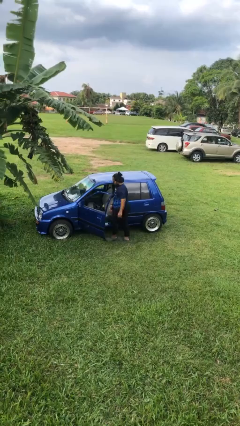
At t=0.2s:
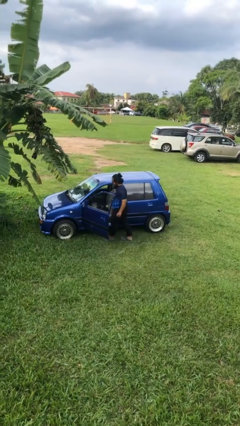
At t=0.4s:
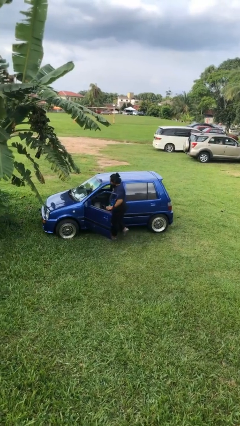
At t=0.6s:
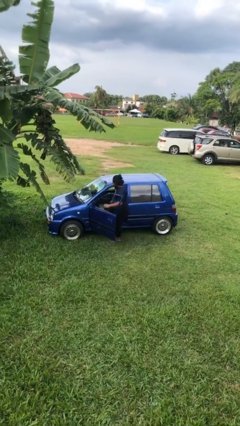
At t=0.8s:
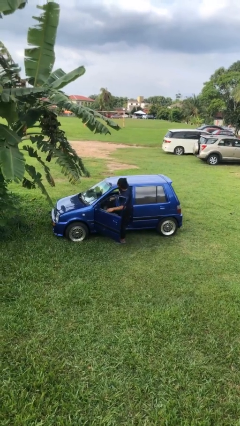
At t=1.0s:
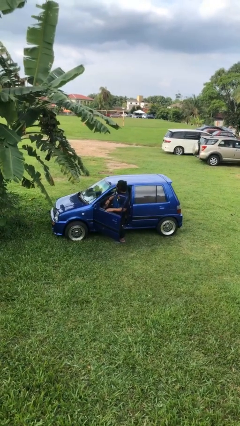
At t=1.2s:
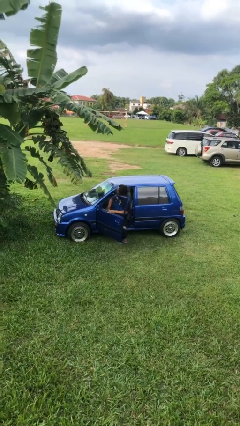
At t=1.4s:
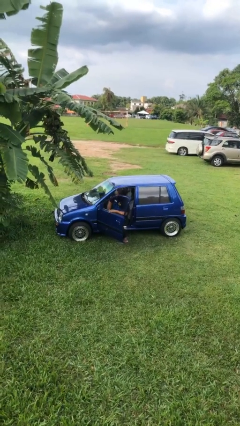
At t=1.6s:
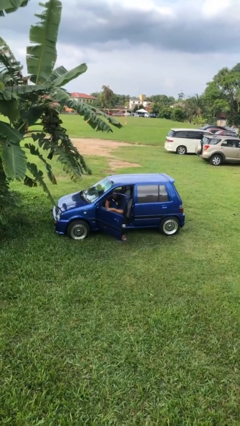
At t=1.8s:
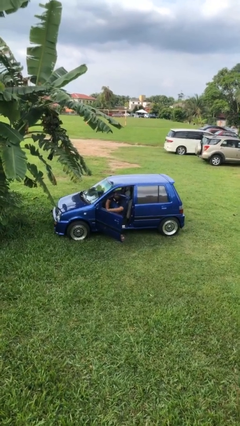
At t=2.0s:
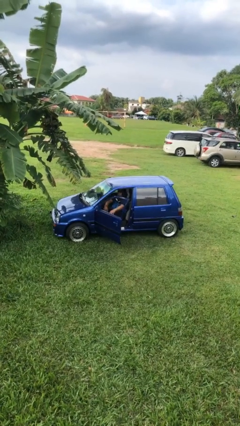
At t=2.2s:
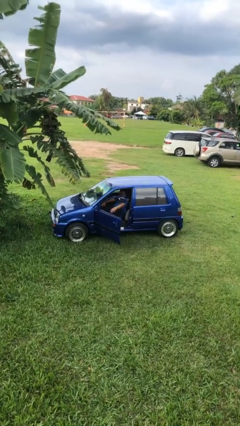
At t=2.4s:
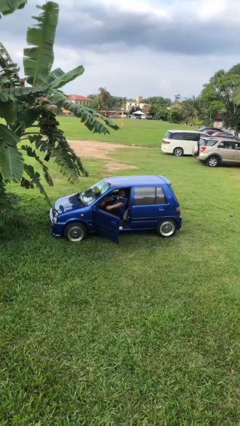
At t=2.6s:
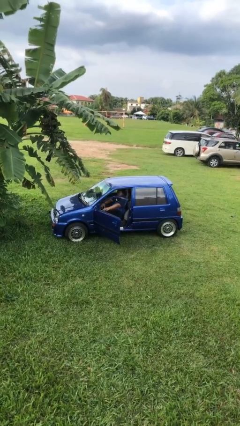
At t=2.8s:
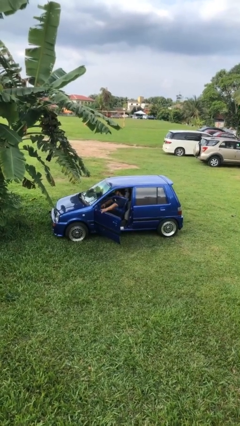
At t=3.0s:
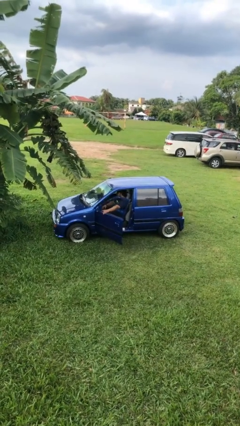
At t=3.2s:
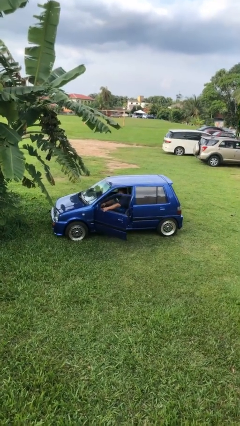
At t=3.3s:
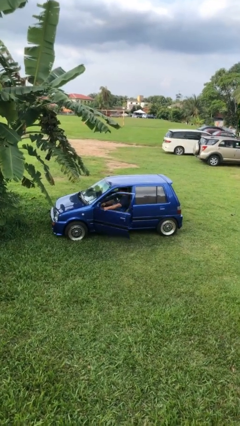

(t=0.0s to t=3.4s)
person enters car

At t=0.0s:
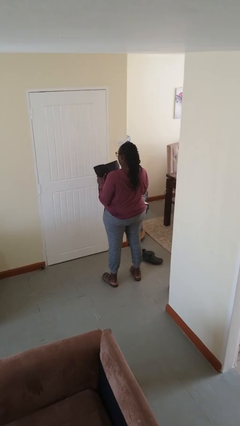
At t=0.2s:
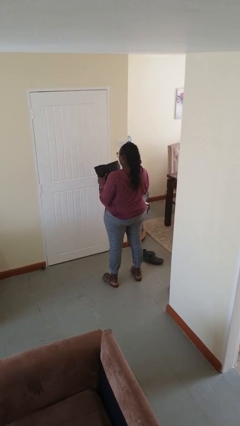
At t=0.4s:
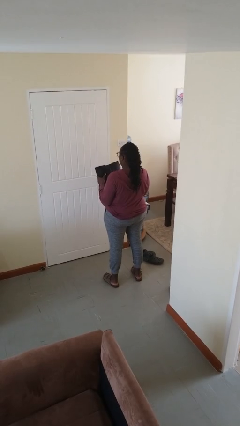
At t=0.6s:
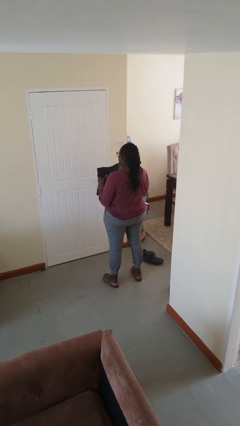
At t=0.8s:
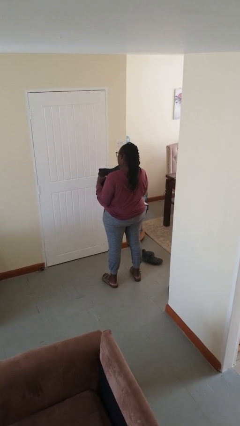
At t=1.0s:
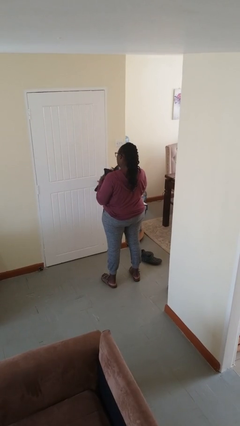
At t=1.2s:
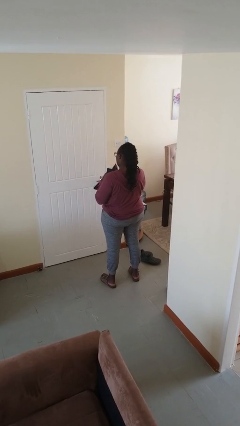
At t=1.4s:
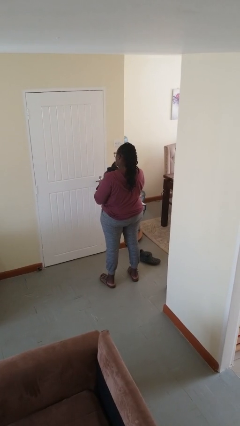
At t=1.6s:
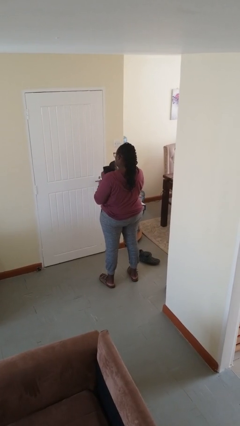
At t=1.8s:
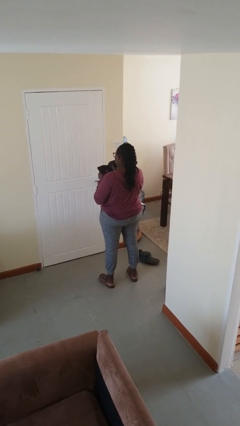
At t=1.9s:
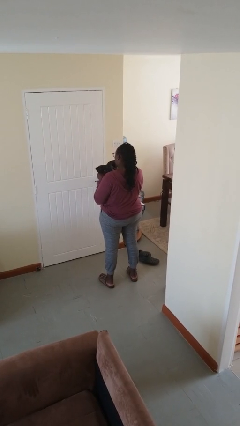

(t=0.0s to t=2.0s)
person squeezes object

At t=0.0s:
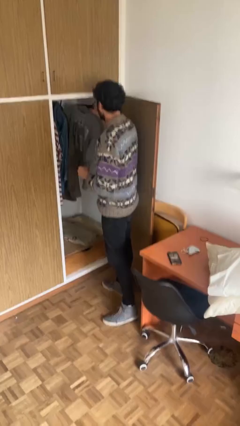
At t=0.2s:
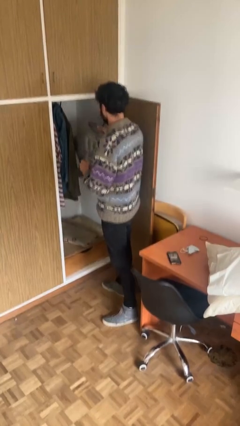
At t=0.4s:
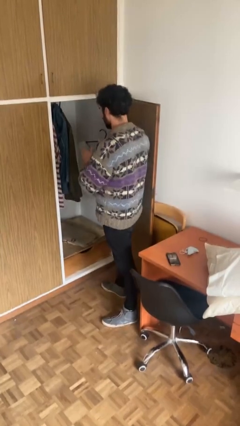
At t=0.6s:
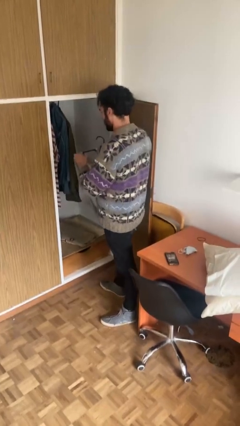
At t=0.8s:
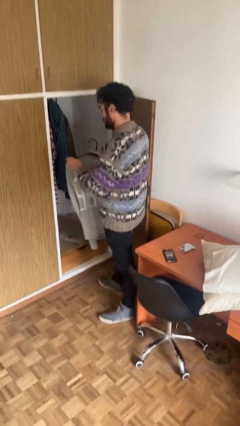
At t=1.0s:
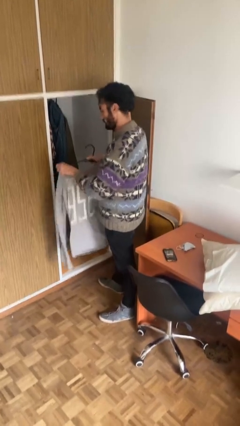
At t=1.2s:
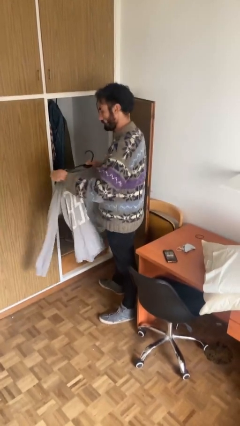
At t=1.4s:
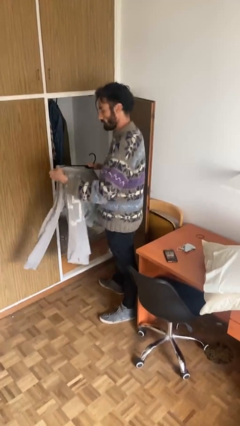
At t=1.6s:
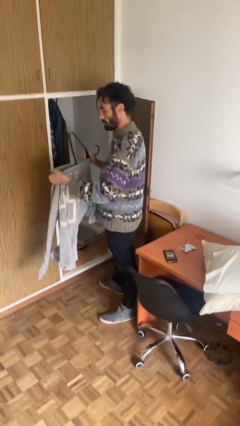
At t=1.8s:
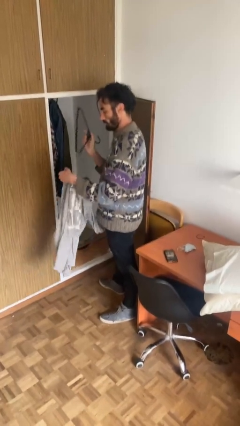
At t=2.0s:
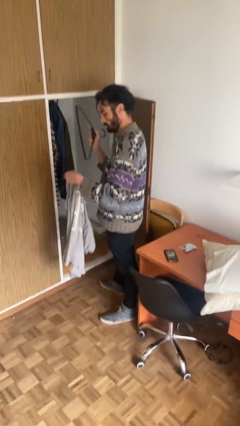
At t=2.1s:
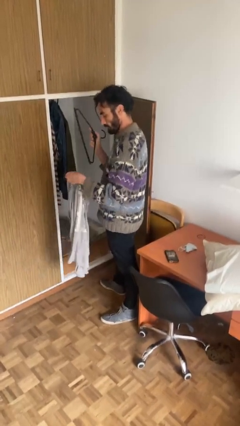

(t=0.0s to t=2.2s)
person takes clothes from closet

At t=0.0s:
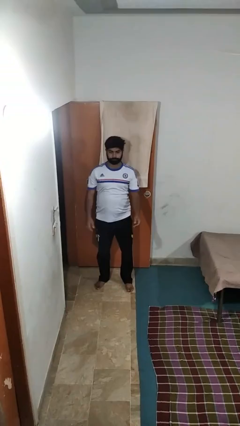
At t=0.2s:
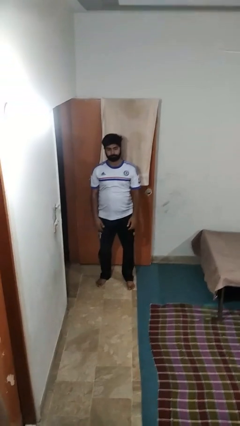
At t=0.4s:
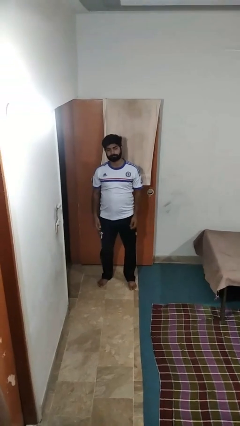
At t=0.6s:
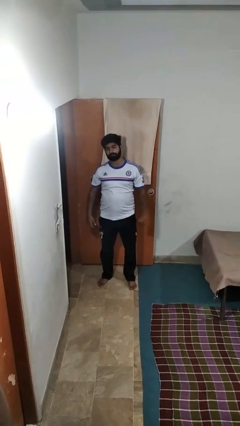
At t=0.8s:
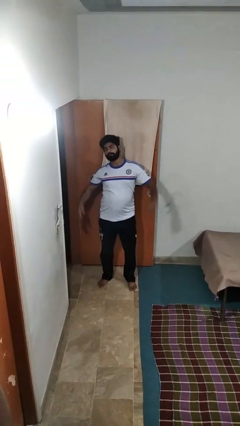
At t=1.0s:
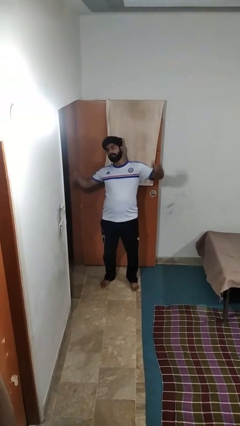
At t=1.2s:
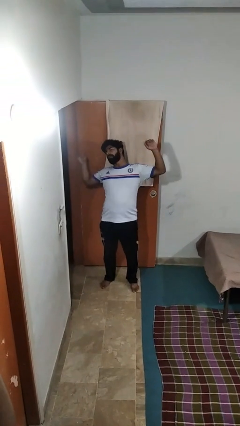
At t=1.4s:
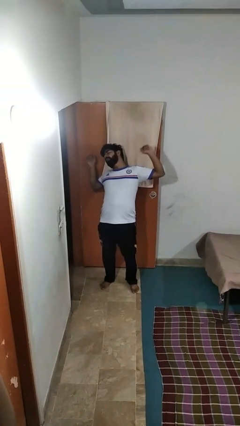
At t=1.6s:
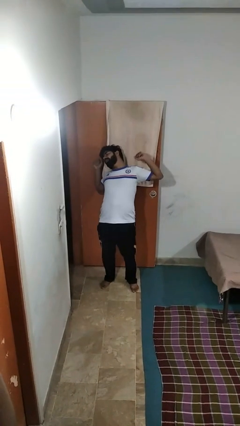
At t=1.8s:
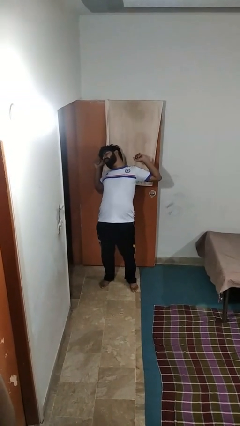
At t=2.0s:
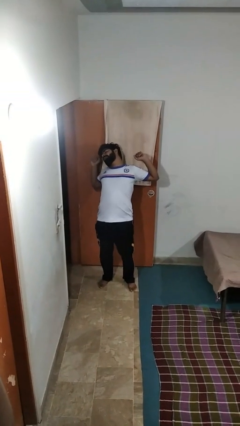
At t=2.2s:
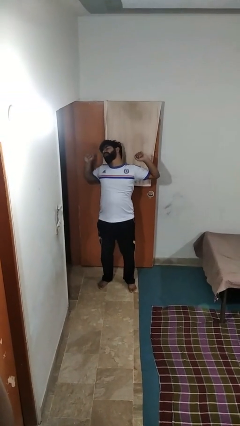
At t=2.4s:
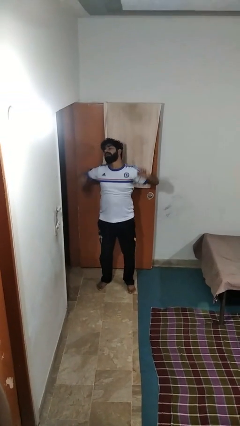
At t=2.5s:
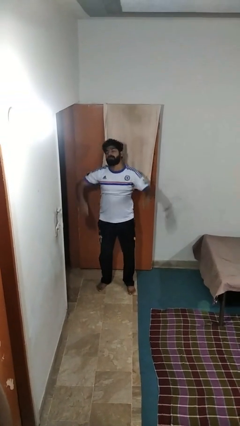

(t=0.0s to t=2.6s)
person stretches arms to side

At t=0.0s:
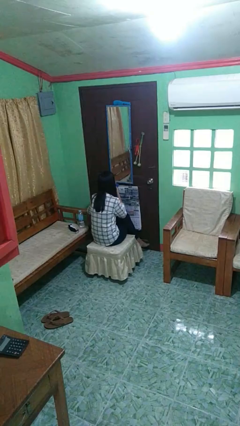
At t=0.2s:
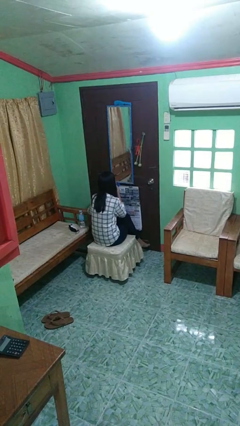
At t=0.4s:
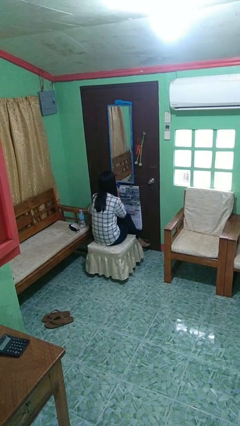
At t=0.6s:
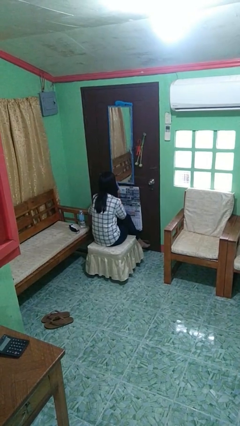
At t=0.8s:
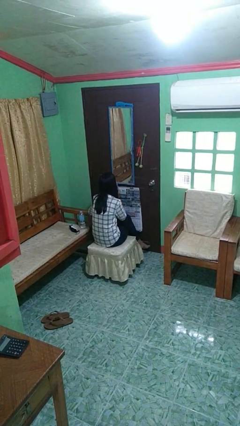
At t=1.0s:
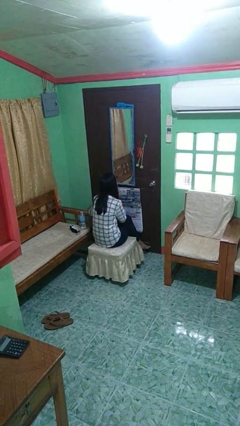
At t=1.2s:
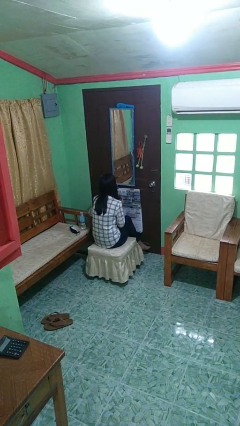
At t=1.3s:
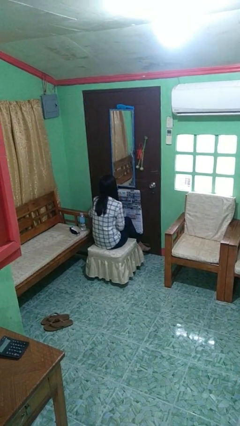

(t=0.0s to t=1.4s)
person wipes mouth with napkin

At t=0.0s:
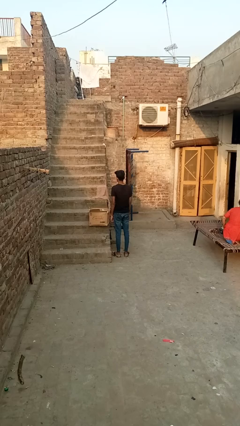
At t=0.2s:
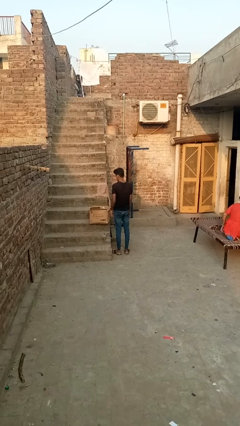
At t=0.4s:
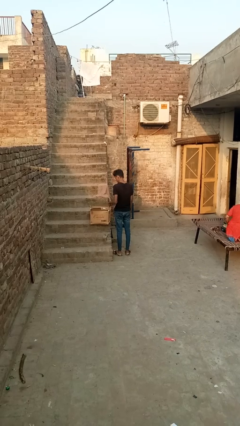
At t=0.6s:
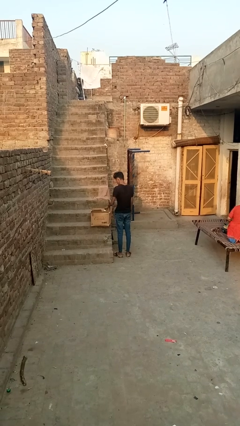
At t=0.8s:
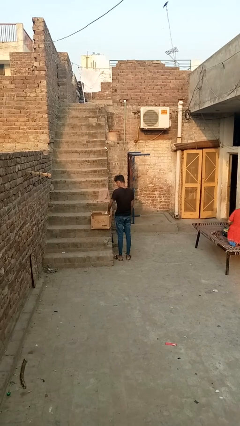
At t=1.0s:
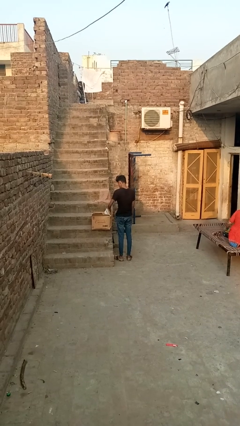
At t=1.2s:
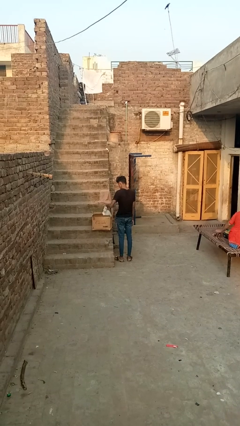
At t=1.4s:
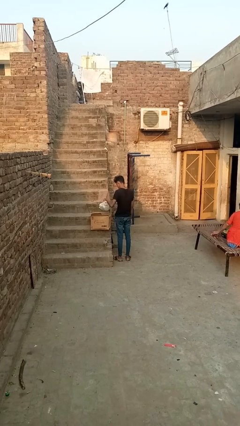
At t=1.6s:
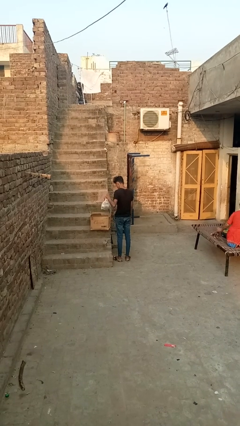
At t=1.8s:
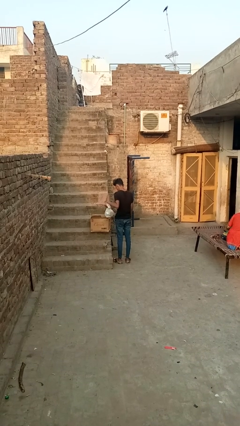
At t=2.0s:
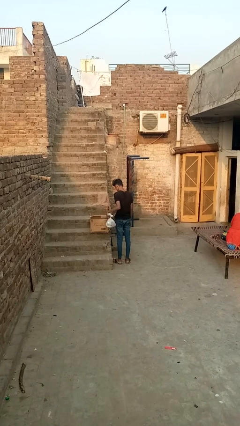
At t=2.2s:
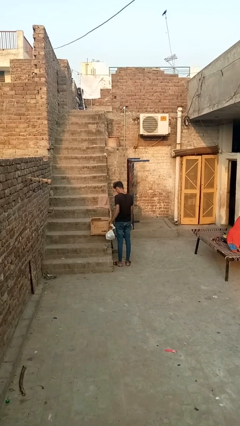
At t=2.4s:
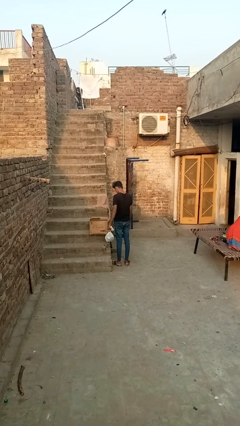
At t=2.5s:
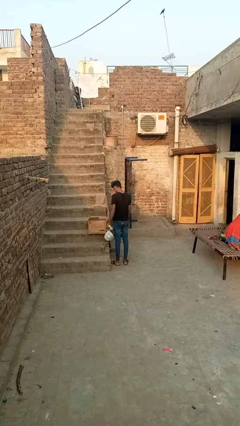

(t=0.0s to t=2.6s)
person takes object from box

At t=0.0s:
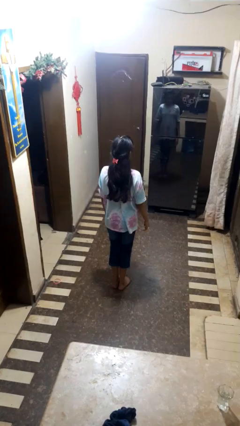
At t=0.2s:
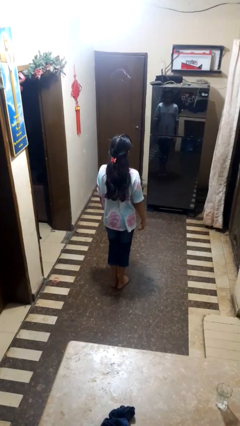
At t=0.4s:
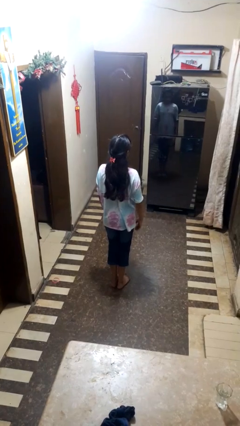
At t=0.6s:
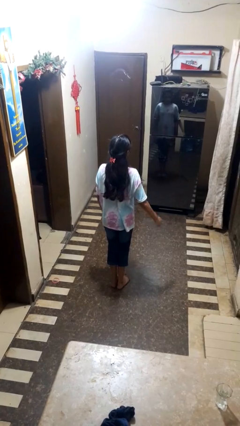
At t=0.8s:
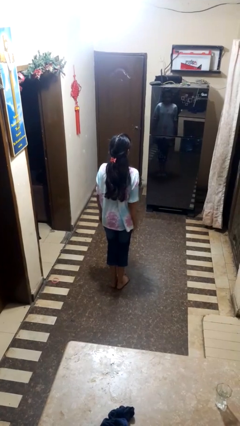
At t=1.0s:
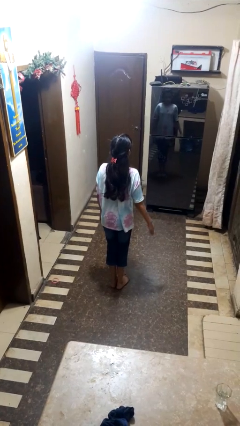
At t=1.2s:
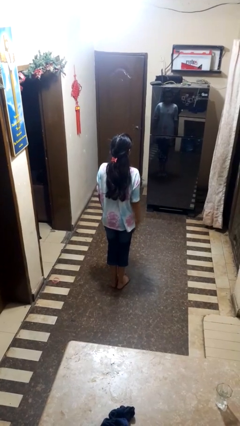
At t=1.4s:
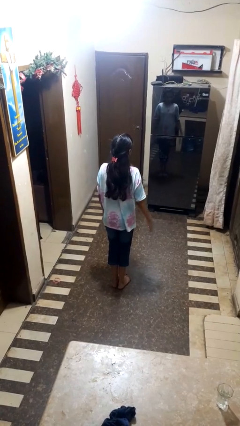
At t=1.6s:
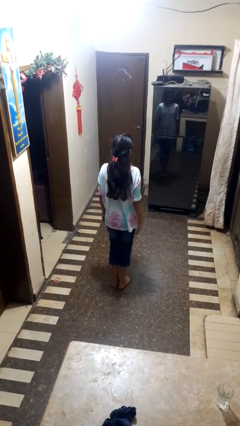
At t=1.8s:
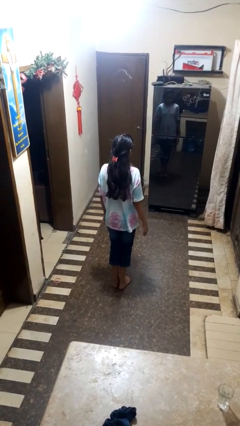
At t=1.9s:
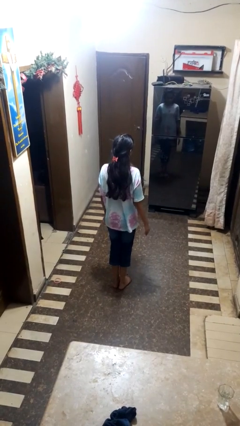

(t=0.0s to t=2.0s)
person slaps hands on thighs

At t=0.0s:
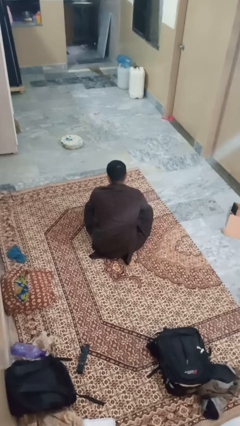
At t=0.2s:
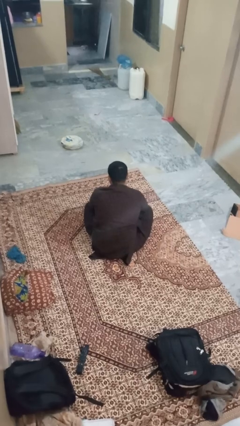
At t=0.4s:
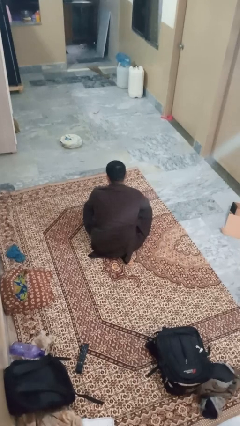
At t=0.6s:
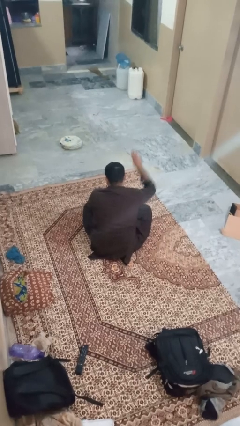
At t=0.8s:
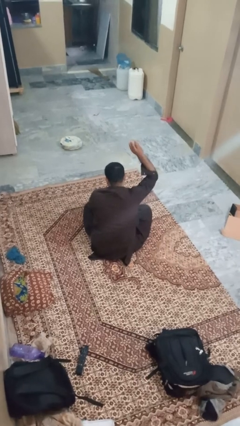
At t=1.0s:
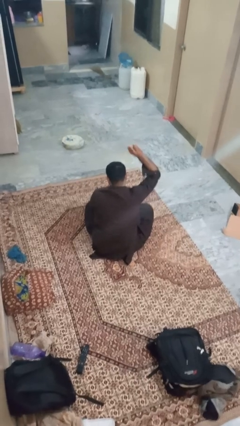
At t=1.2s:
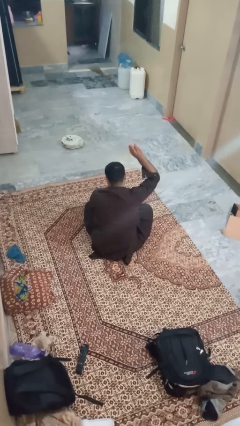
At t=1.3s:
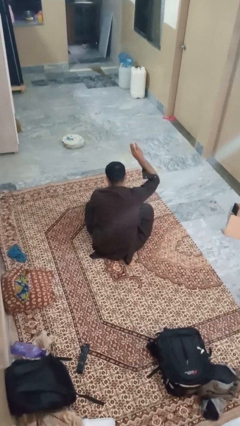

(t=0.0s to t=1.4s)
person gestures number three
